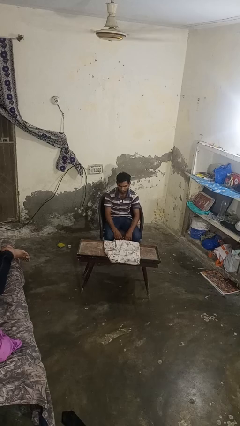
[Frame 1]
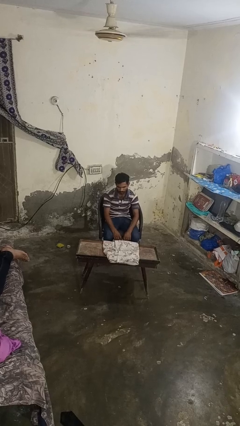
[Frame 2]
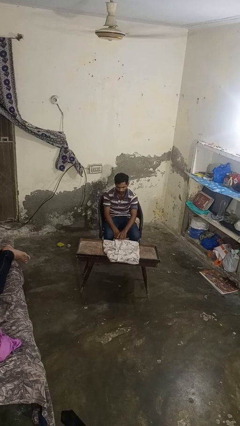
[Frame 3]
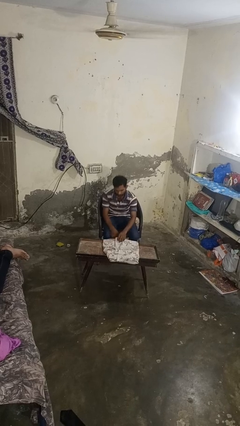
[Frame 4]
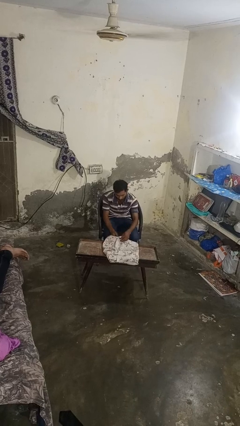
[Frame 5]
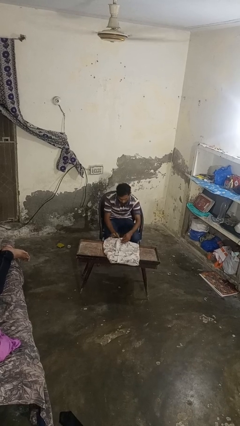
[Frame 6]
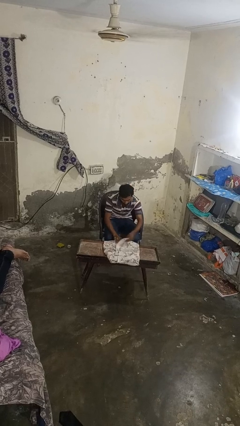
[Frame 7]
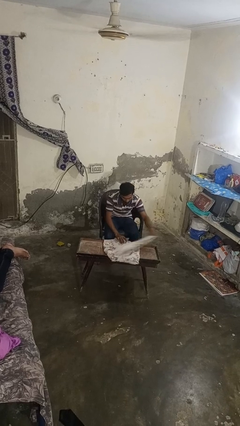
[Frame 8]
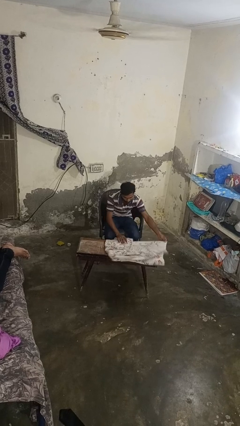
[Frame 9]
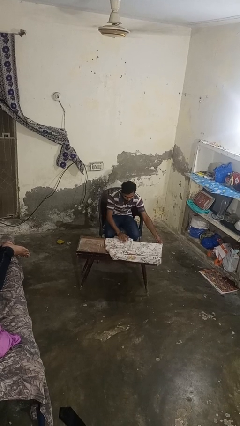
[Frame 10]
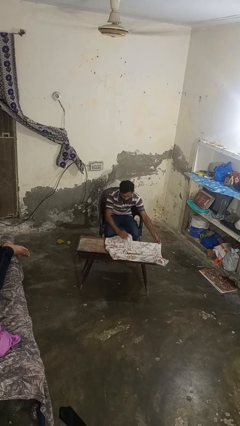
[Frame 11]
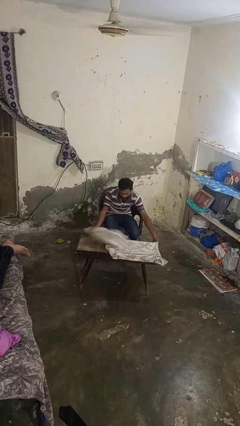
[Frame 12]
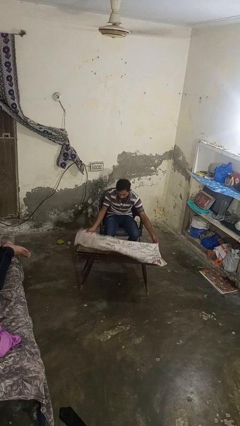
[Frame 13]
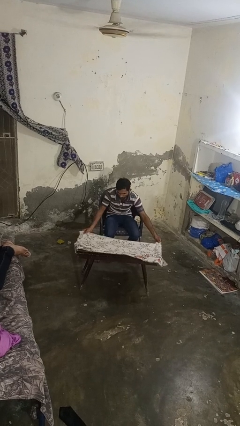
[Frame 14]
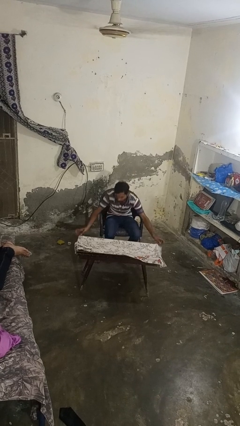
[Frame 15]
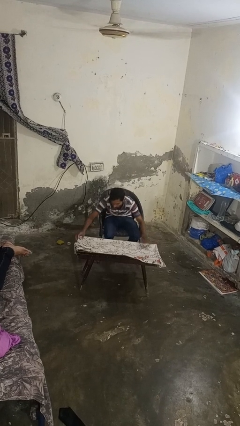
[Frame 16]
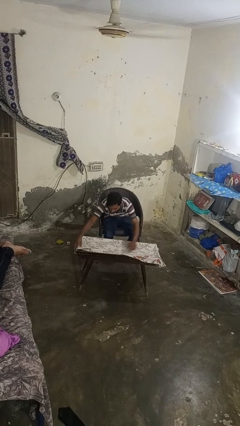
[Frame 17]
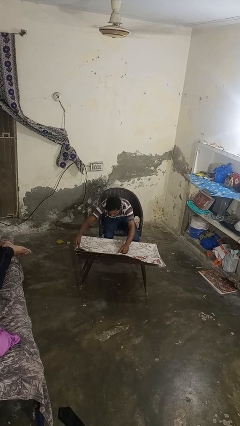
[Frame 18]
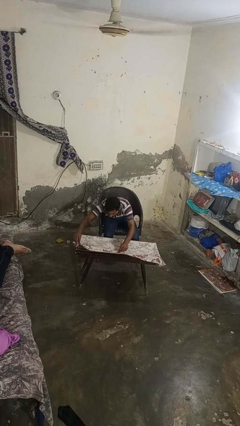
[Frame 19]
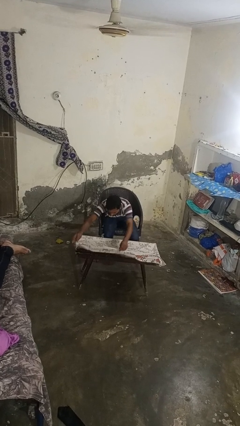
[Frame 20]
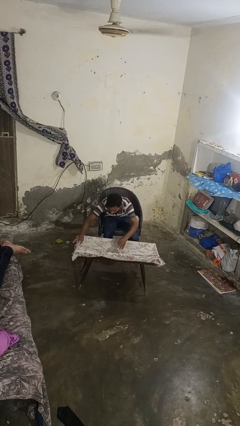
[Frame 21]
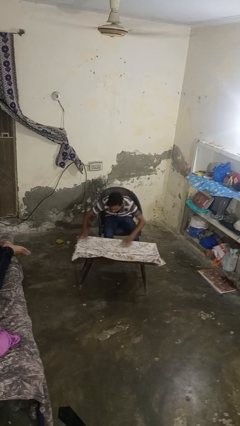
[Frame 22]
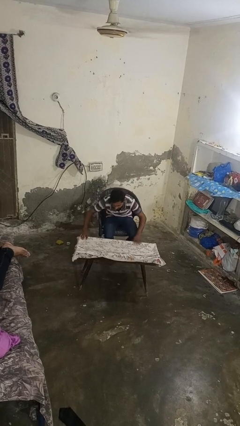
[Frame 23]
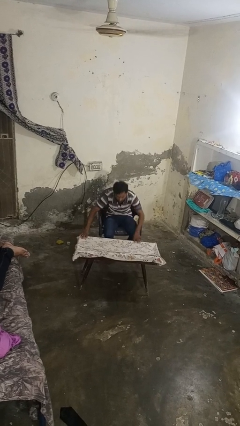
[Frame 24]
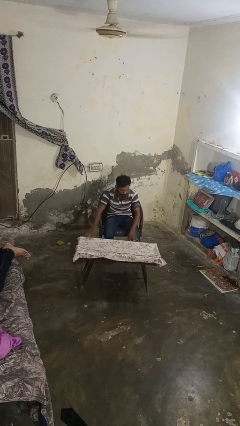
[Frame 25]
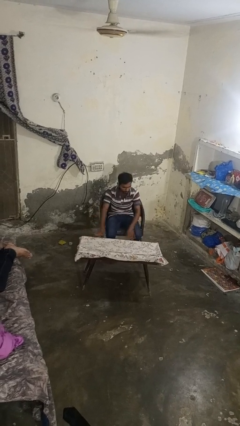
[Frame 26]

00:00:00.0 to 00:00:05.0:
person spreads tablecloth

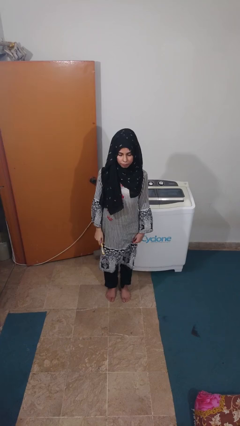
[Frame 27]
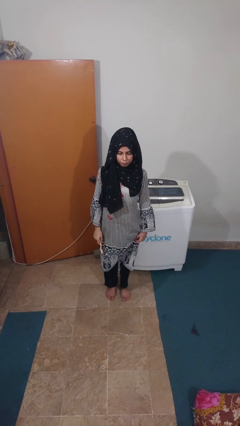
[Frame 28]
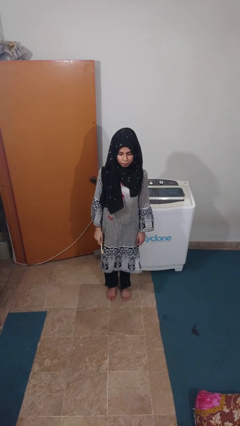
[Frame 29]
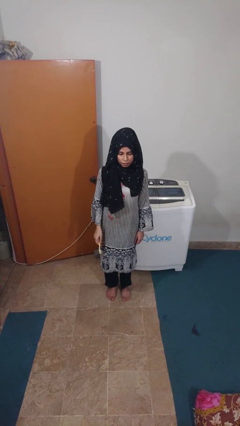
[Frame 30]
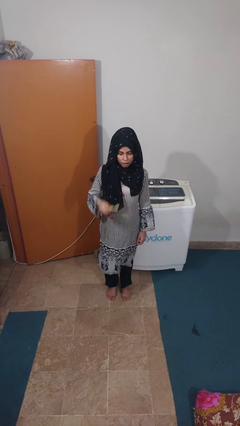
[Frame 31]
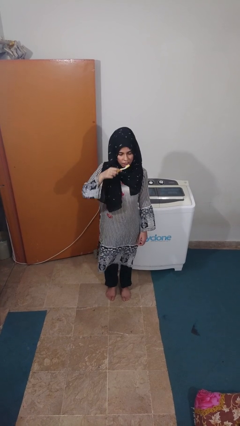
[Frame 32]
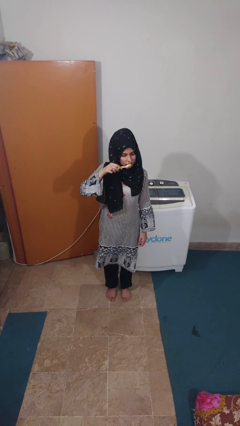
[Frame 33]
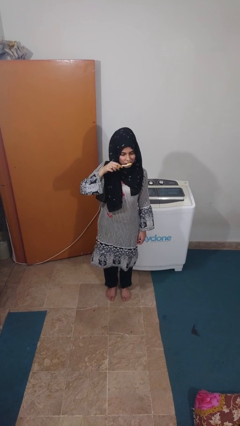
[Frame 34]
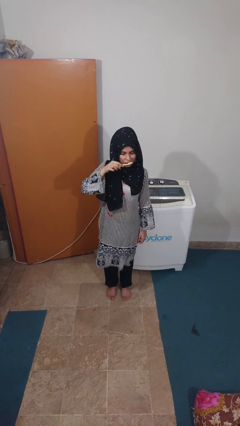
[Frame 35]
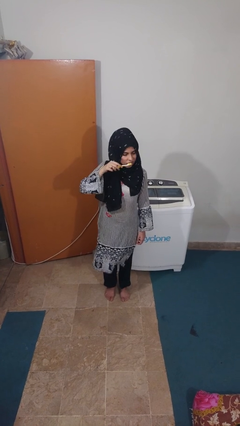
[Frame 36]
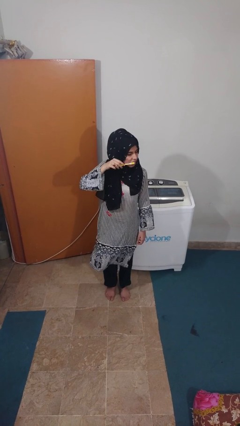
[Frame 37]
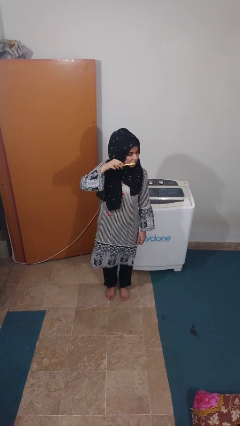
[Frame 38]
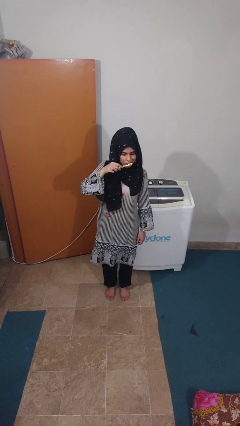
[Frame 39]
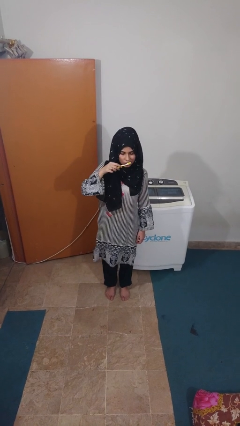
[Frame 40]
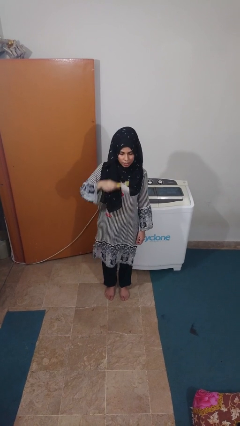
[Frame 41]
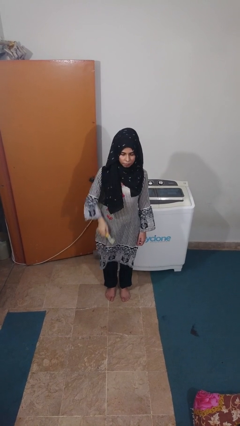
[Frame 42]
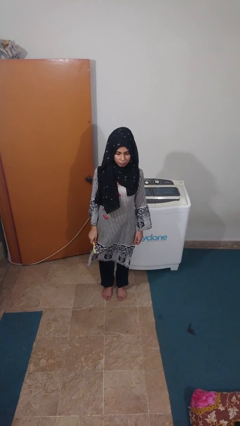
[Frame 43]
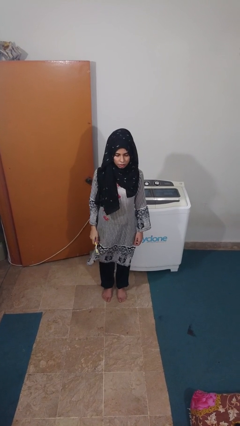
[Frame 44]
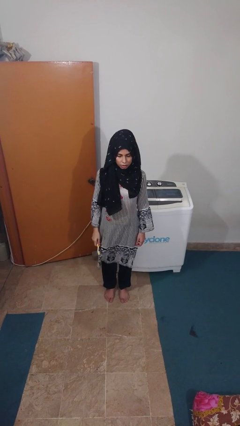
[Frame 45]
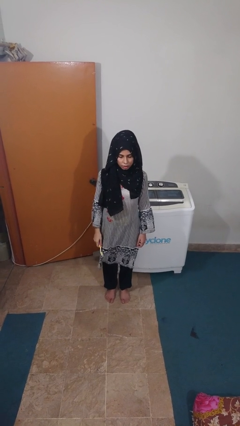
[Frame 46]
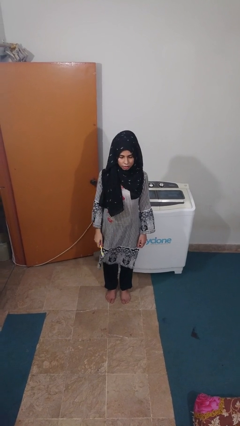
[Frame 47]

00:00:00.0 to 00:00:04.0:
person brushes teeth

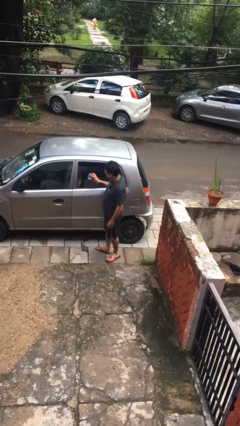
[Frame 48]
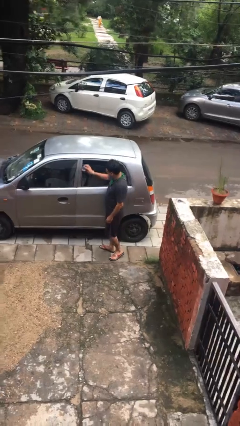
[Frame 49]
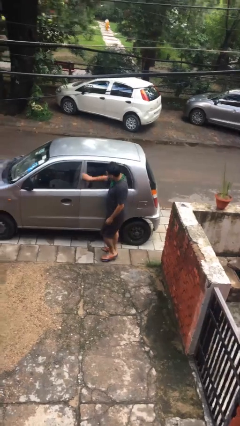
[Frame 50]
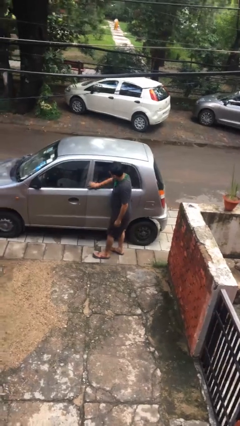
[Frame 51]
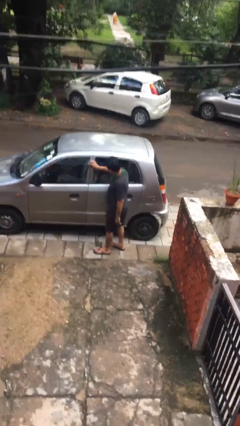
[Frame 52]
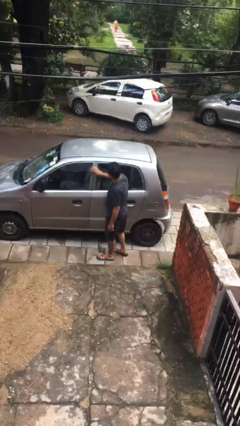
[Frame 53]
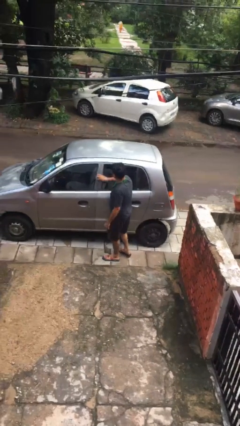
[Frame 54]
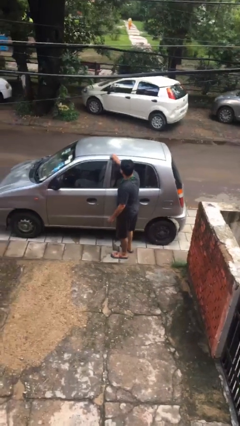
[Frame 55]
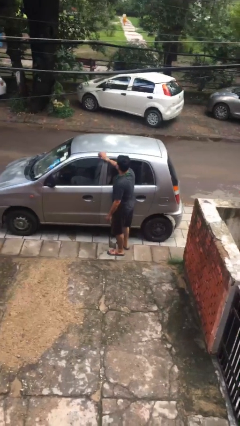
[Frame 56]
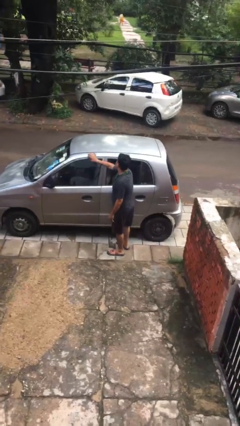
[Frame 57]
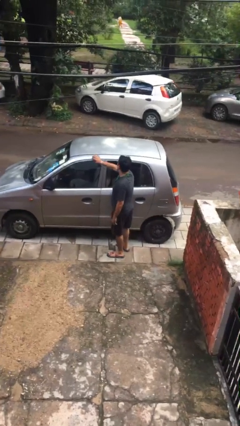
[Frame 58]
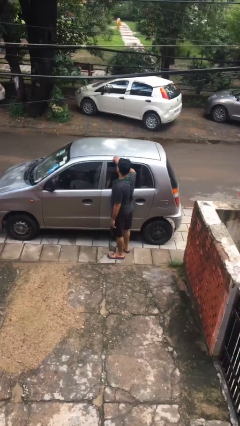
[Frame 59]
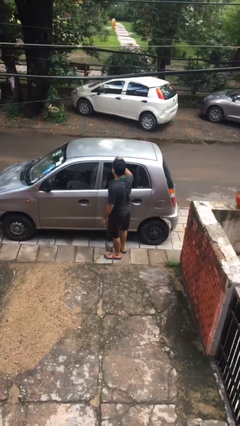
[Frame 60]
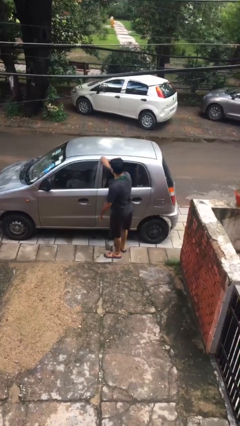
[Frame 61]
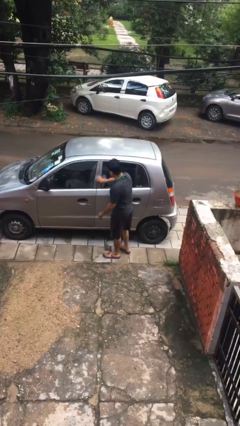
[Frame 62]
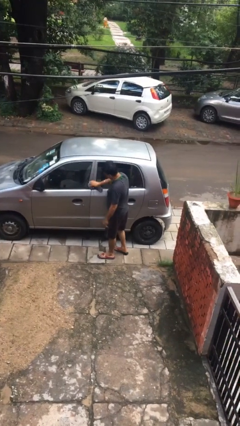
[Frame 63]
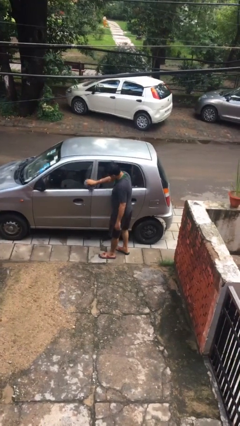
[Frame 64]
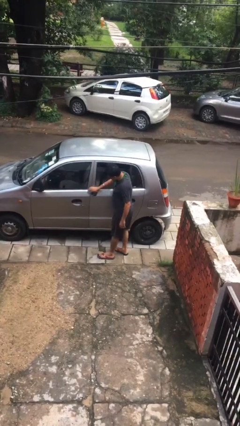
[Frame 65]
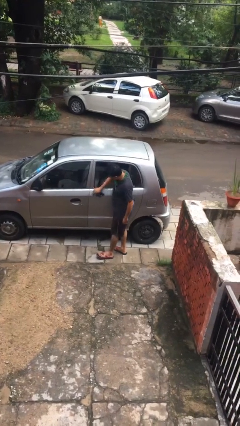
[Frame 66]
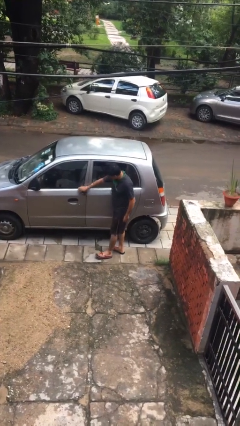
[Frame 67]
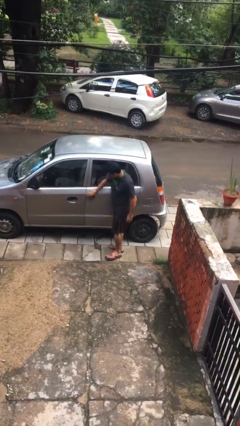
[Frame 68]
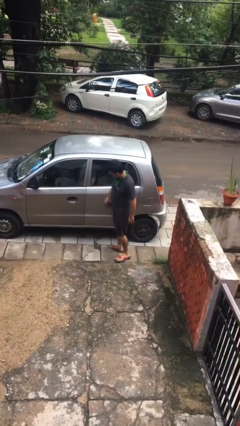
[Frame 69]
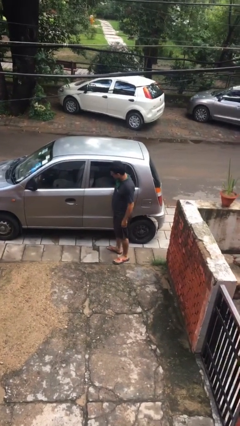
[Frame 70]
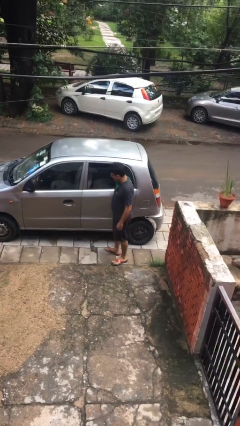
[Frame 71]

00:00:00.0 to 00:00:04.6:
person polishes car with rag

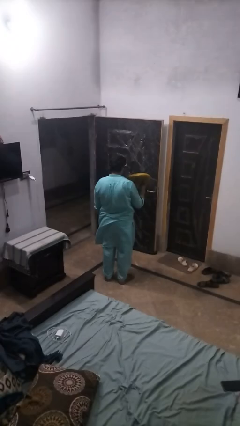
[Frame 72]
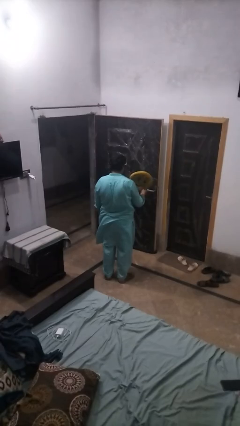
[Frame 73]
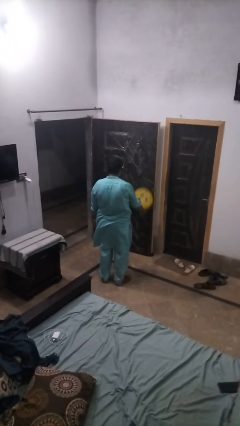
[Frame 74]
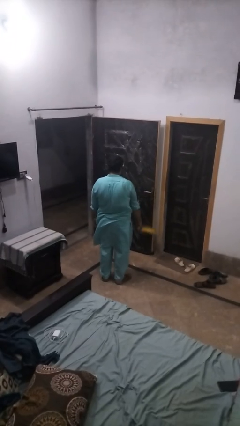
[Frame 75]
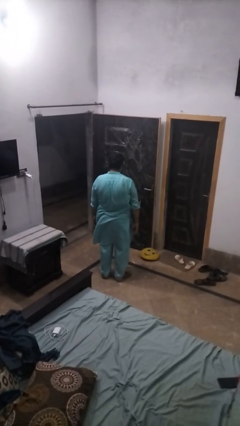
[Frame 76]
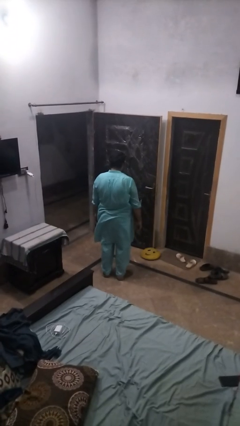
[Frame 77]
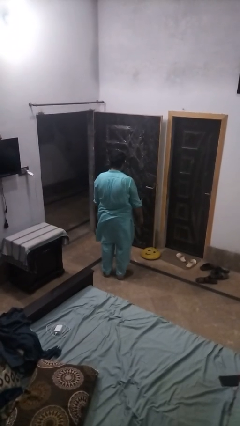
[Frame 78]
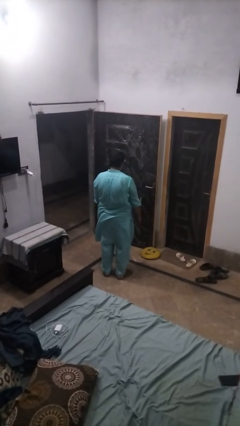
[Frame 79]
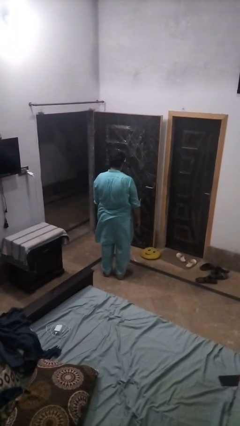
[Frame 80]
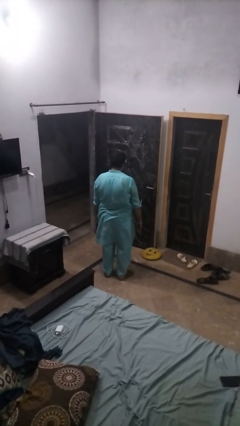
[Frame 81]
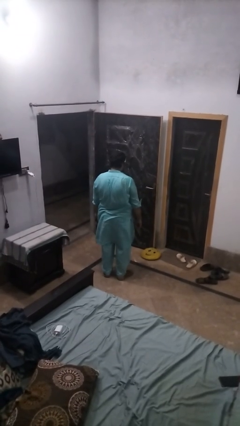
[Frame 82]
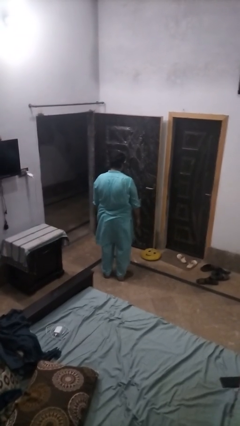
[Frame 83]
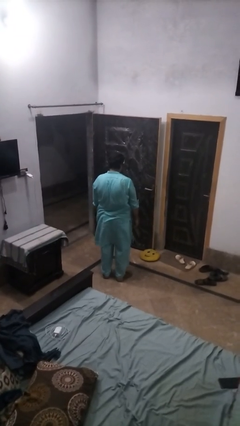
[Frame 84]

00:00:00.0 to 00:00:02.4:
person throws object to ground

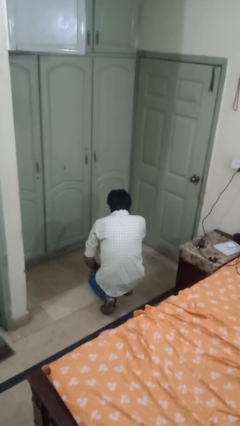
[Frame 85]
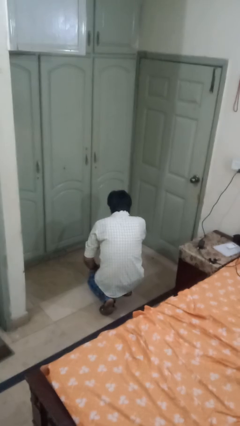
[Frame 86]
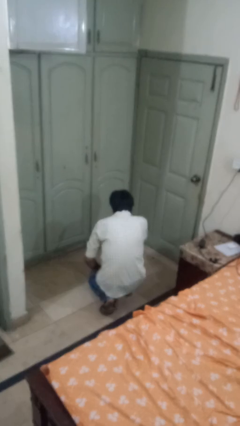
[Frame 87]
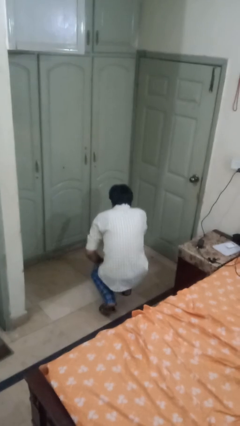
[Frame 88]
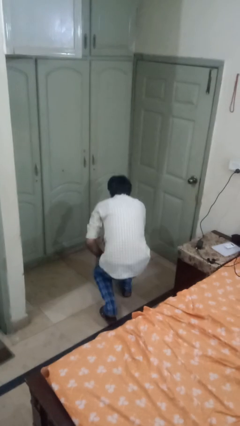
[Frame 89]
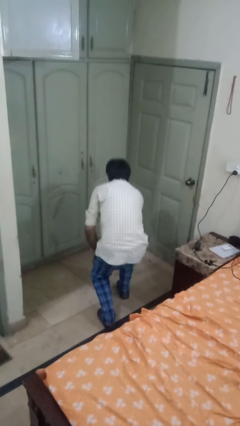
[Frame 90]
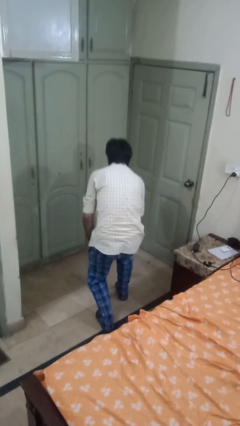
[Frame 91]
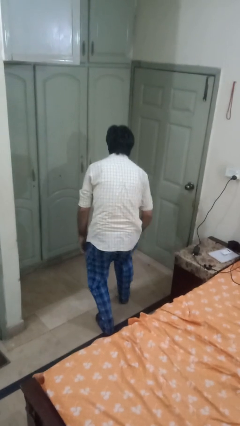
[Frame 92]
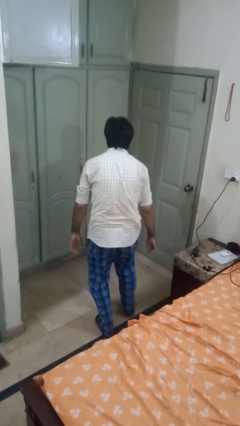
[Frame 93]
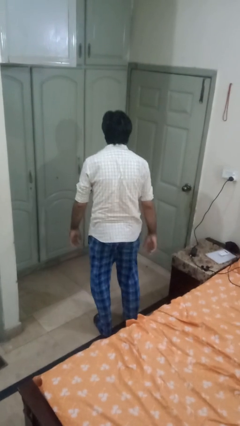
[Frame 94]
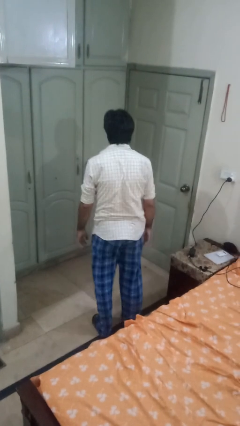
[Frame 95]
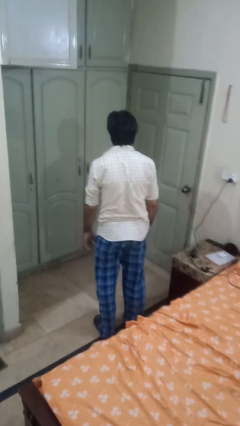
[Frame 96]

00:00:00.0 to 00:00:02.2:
person stands up from floor
